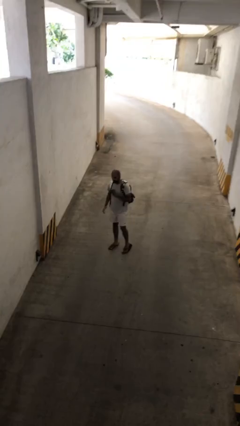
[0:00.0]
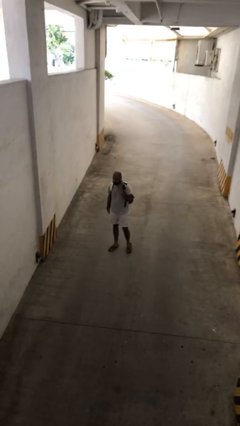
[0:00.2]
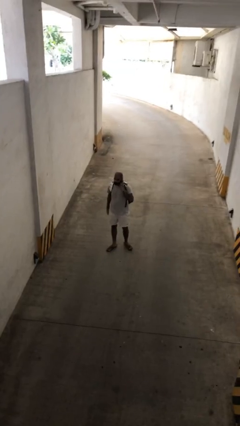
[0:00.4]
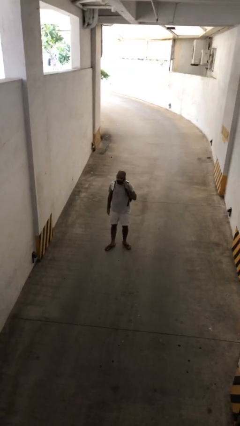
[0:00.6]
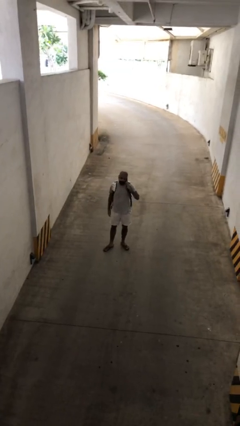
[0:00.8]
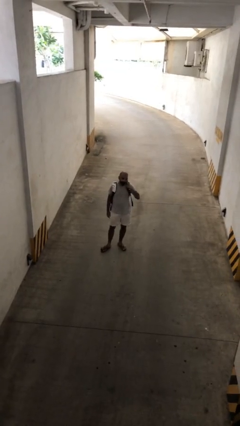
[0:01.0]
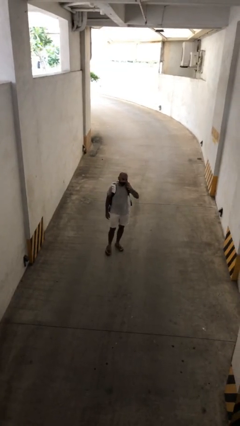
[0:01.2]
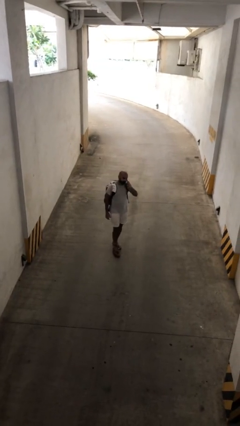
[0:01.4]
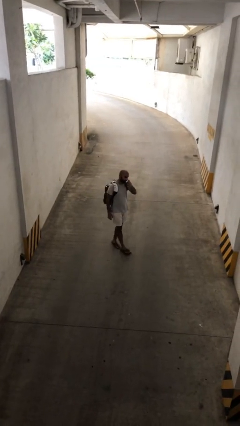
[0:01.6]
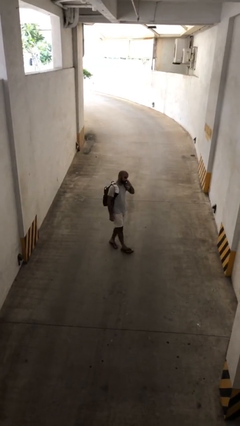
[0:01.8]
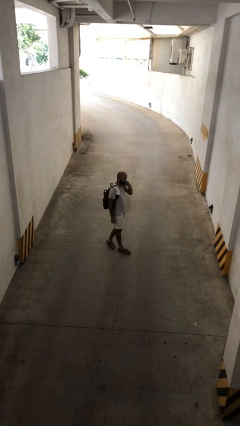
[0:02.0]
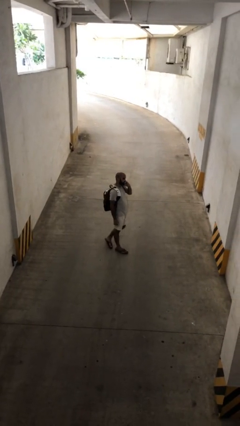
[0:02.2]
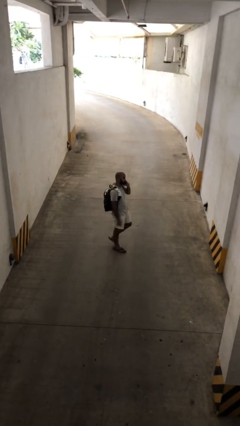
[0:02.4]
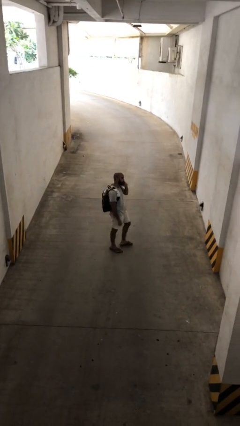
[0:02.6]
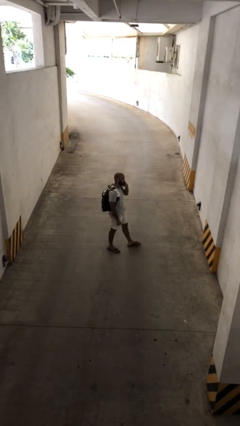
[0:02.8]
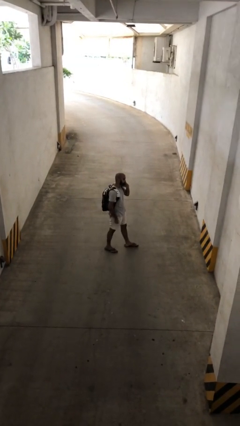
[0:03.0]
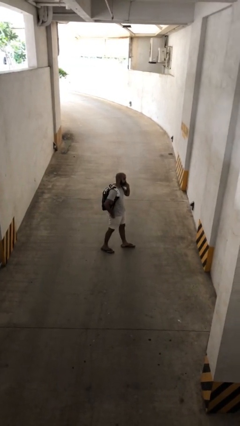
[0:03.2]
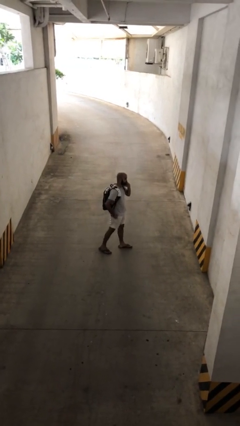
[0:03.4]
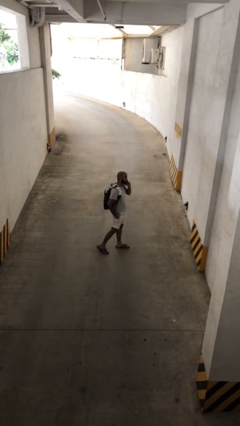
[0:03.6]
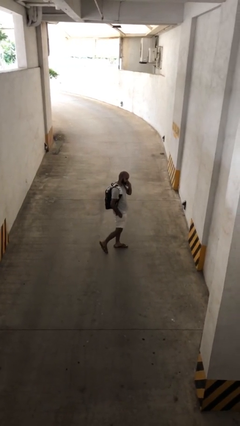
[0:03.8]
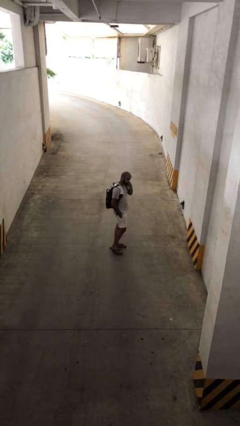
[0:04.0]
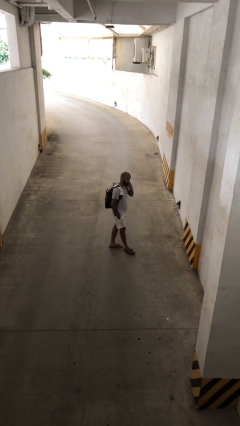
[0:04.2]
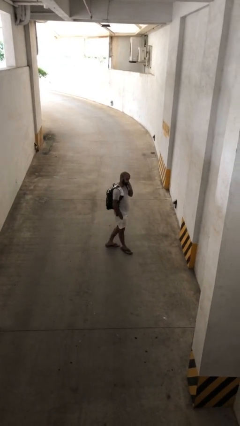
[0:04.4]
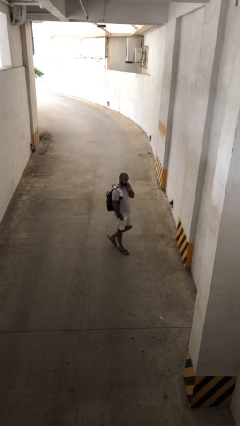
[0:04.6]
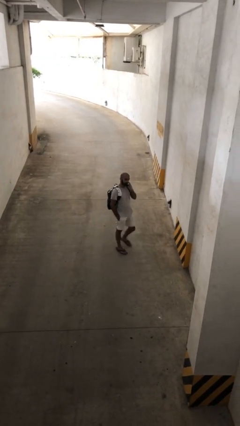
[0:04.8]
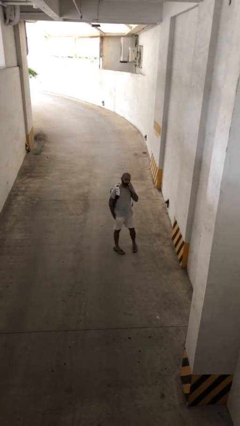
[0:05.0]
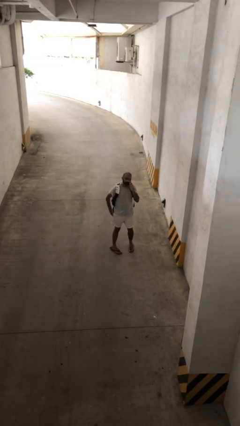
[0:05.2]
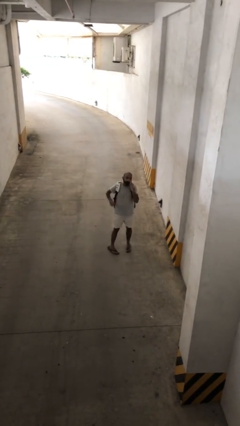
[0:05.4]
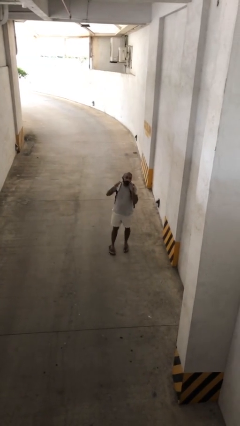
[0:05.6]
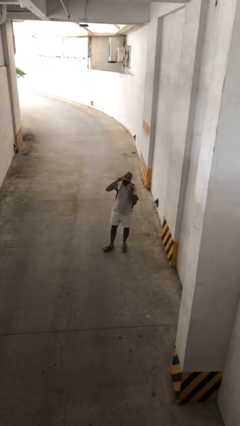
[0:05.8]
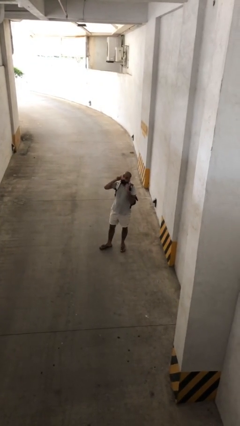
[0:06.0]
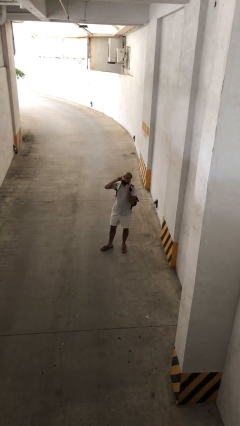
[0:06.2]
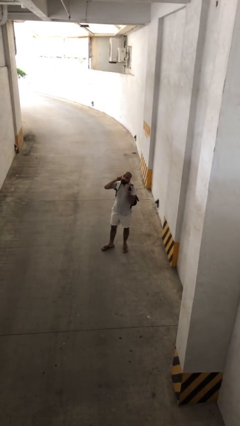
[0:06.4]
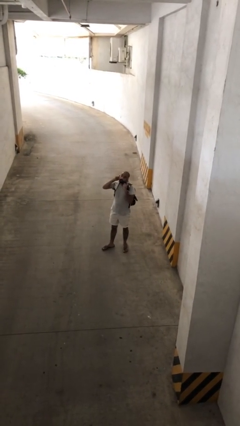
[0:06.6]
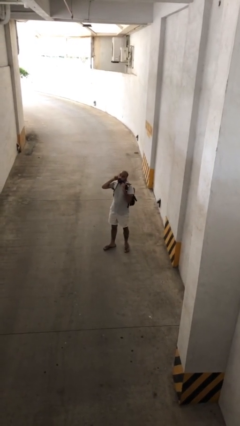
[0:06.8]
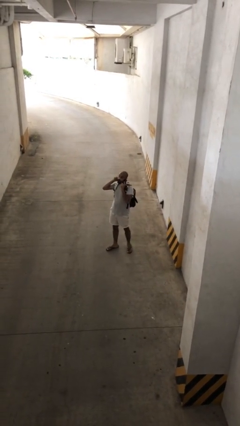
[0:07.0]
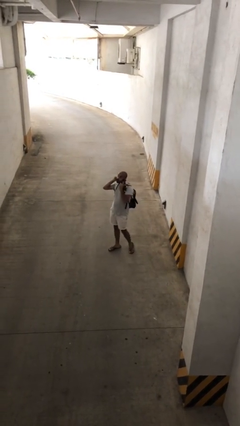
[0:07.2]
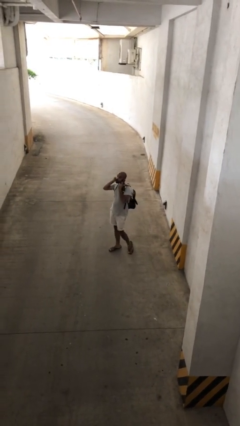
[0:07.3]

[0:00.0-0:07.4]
person talks on phone

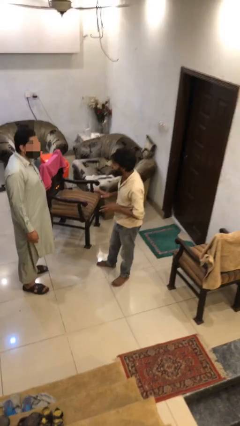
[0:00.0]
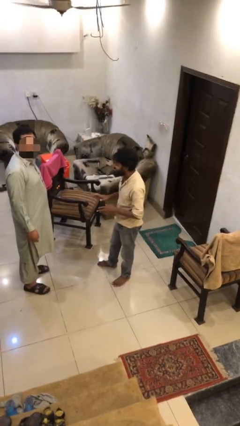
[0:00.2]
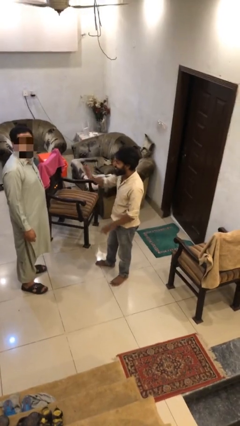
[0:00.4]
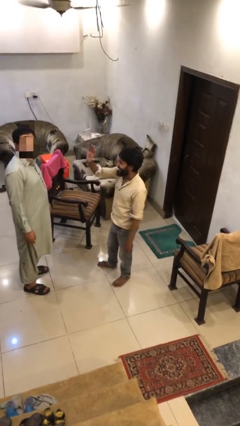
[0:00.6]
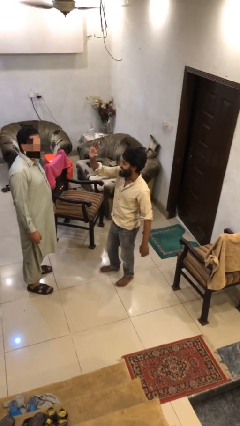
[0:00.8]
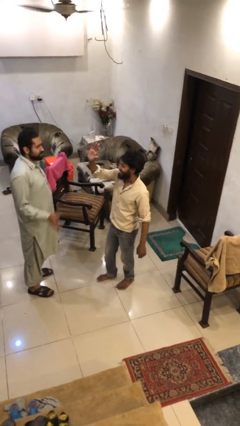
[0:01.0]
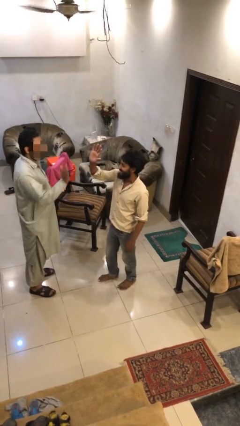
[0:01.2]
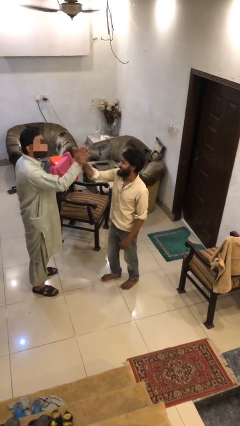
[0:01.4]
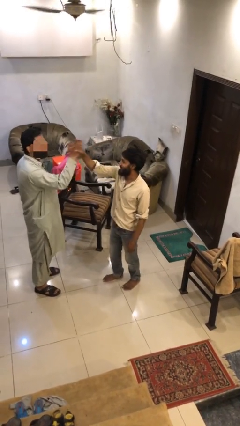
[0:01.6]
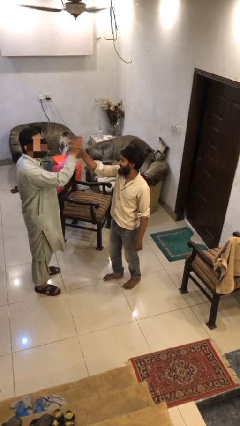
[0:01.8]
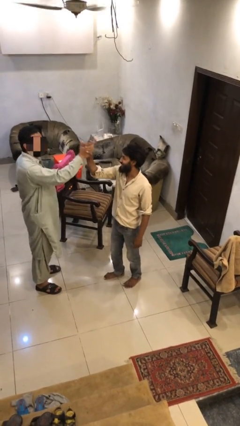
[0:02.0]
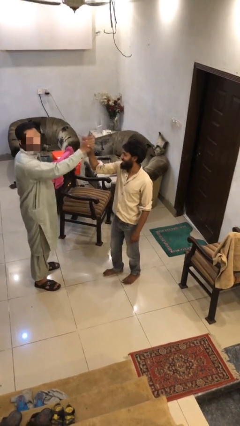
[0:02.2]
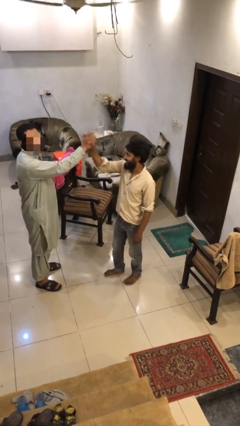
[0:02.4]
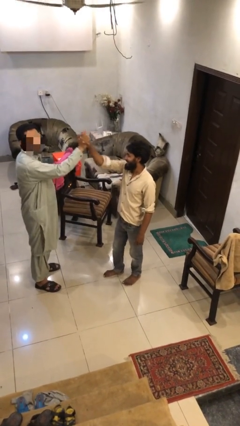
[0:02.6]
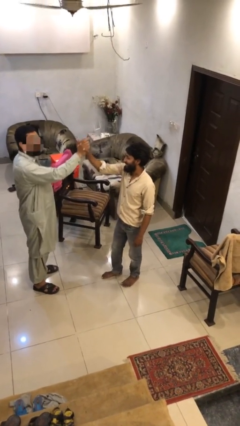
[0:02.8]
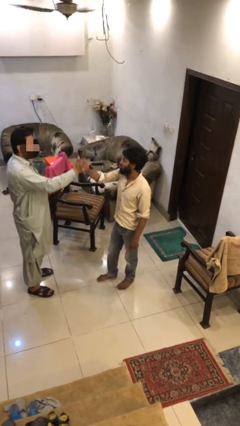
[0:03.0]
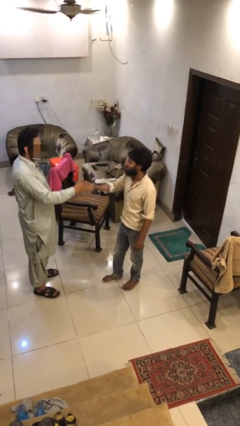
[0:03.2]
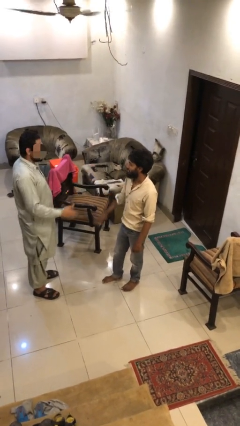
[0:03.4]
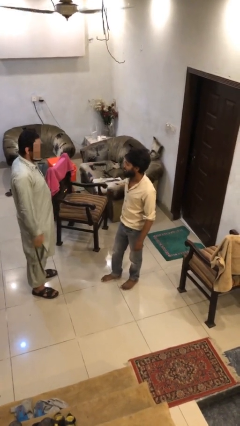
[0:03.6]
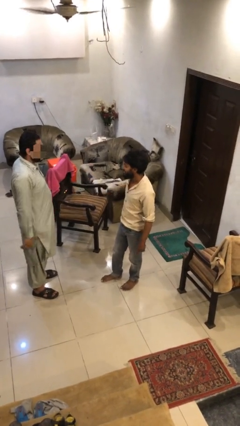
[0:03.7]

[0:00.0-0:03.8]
person highfives hand

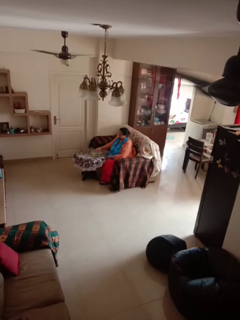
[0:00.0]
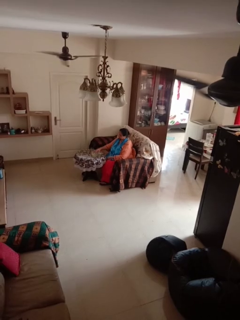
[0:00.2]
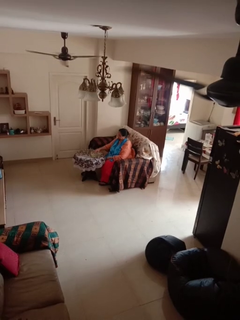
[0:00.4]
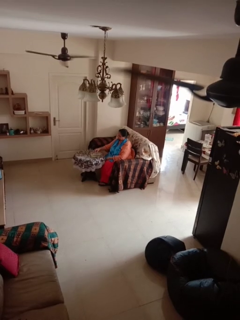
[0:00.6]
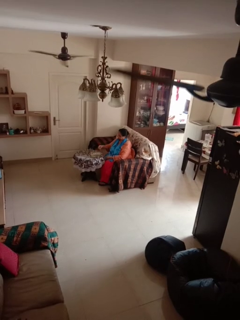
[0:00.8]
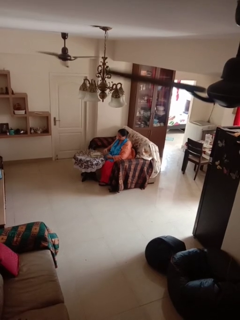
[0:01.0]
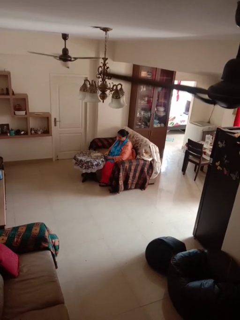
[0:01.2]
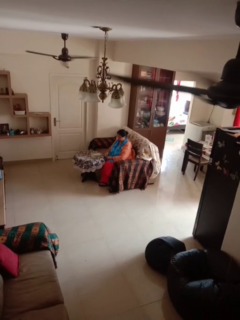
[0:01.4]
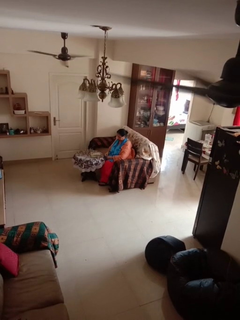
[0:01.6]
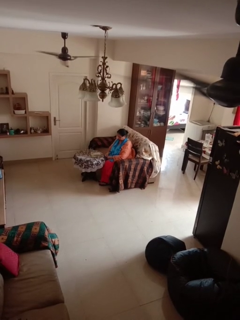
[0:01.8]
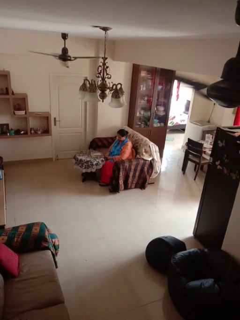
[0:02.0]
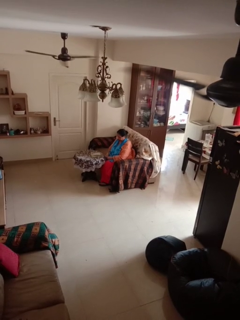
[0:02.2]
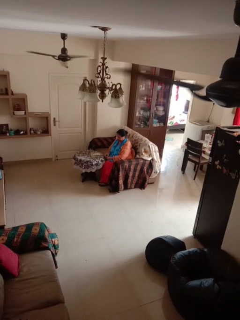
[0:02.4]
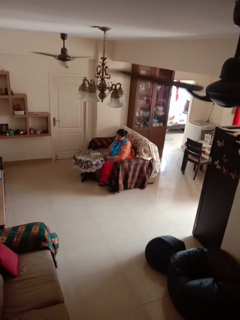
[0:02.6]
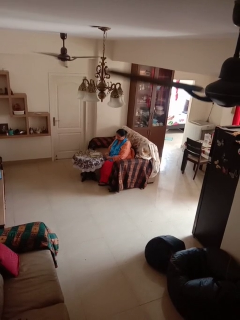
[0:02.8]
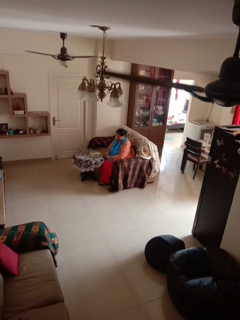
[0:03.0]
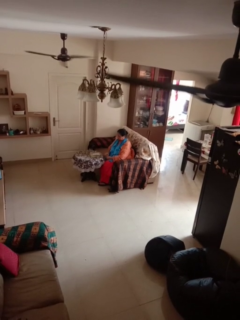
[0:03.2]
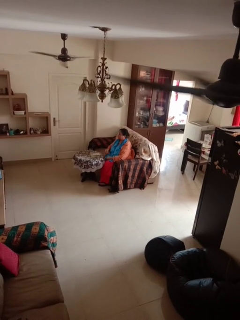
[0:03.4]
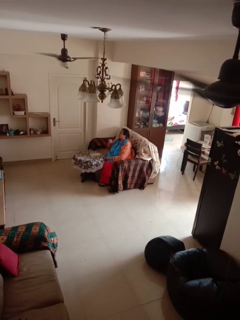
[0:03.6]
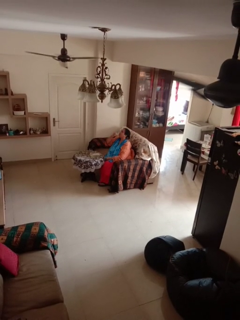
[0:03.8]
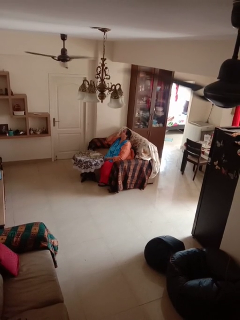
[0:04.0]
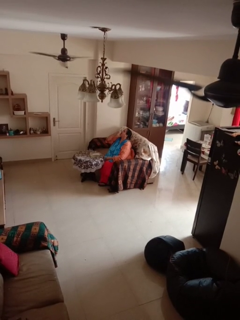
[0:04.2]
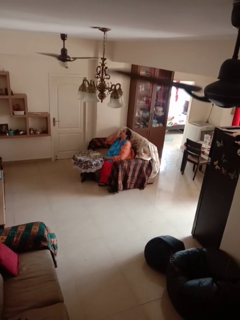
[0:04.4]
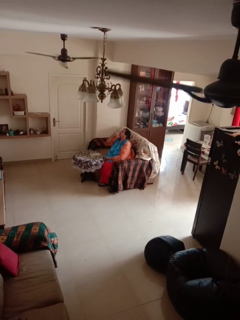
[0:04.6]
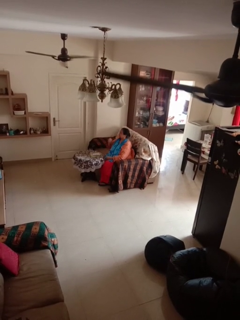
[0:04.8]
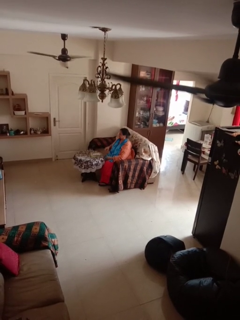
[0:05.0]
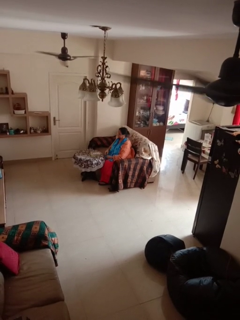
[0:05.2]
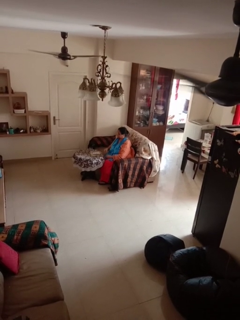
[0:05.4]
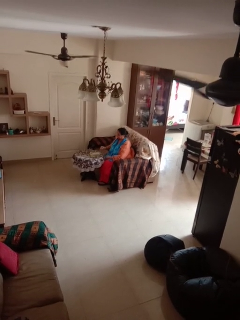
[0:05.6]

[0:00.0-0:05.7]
person takes medicine pills

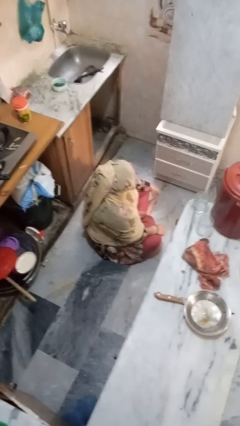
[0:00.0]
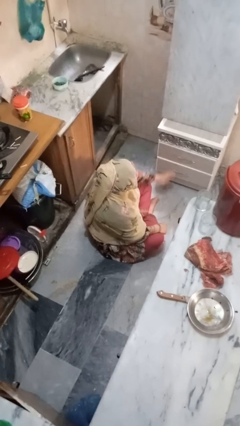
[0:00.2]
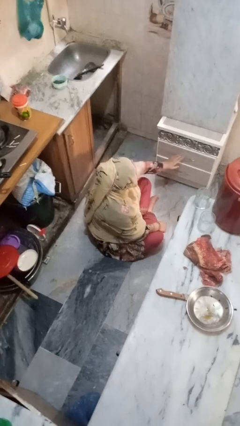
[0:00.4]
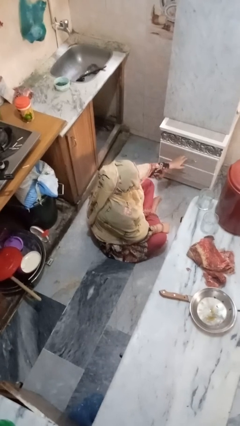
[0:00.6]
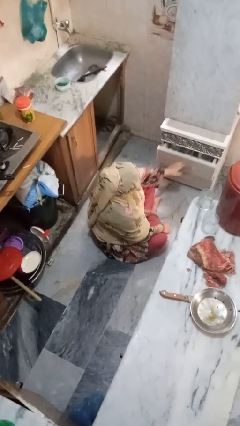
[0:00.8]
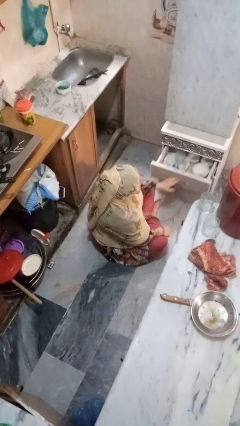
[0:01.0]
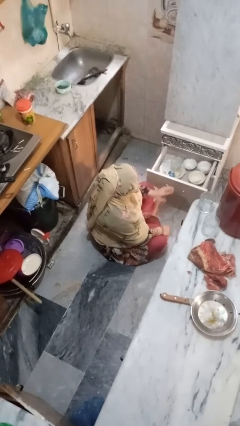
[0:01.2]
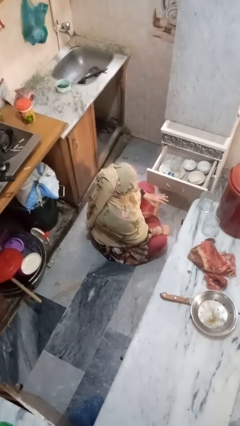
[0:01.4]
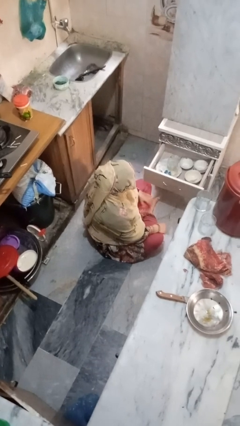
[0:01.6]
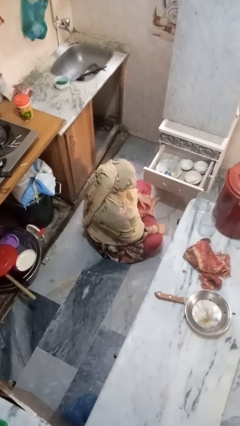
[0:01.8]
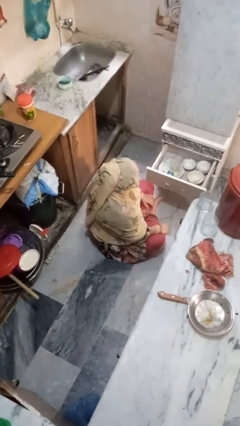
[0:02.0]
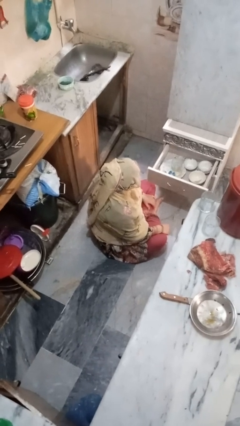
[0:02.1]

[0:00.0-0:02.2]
person opens kitchen drawer

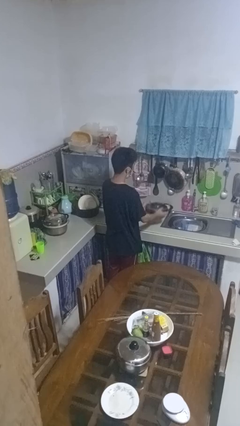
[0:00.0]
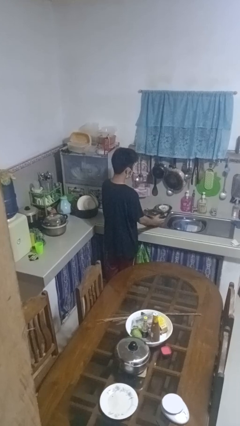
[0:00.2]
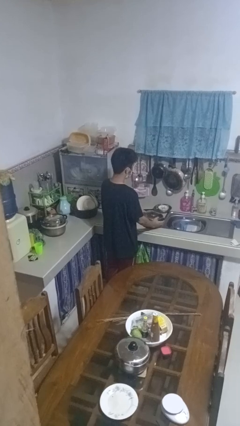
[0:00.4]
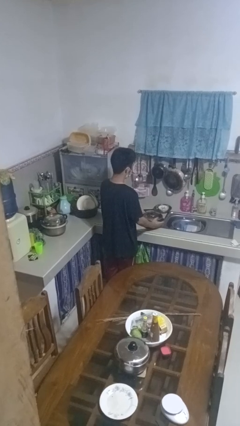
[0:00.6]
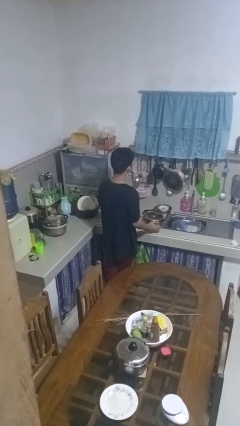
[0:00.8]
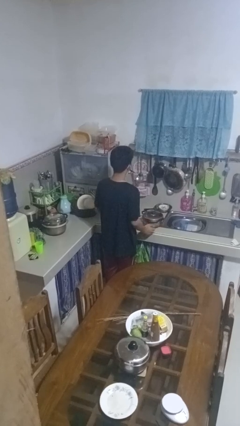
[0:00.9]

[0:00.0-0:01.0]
person puts down object on countertop
